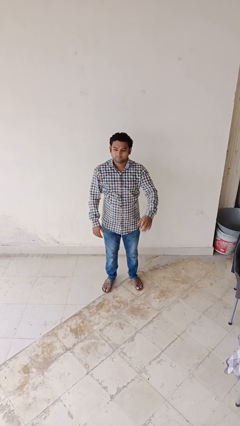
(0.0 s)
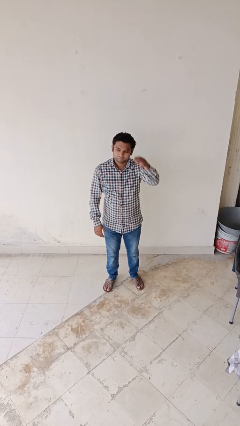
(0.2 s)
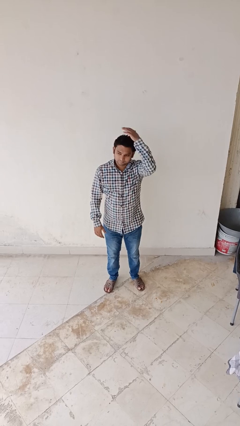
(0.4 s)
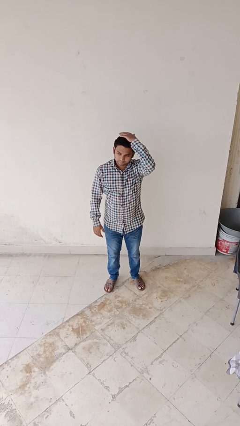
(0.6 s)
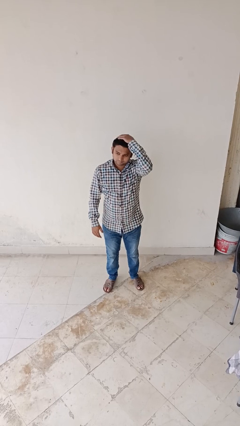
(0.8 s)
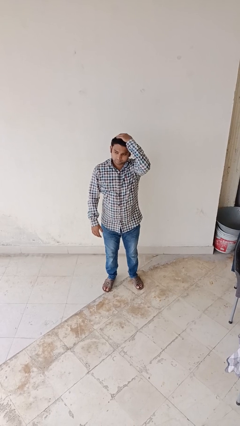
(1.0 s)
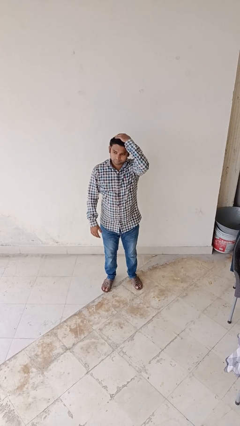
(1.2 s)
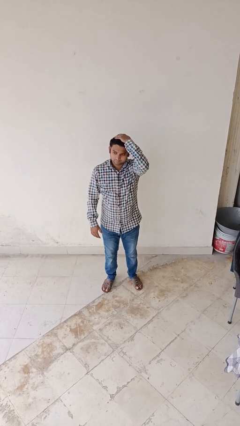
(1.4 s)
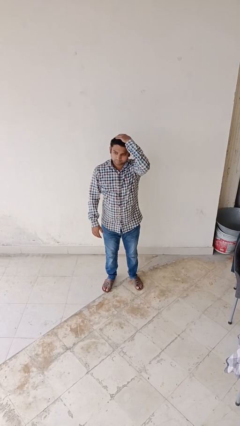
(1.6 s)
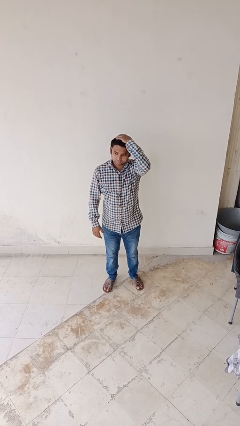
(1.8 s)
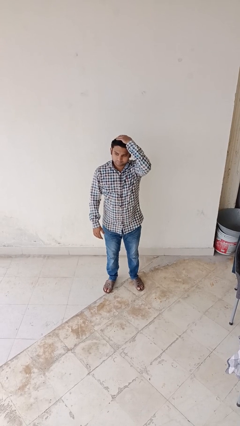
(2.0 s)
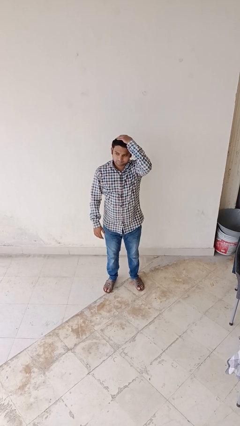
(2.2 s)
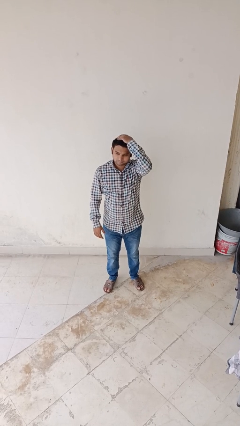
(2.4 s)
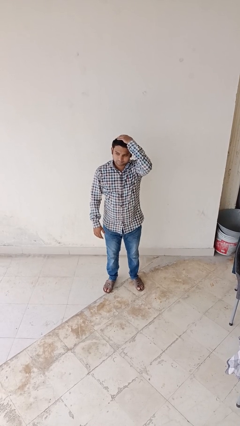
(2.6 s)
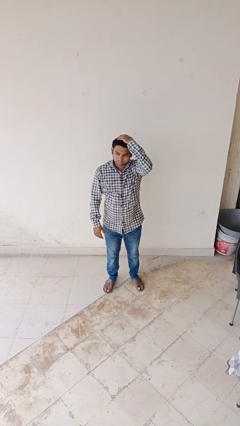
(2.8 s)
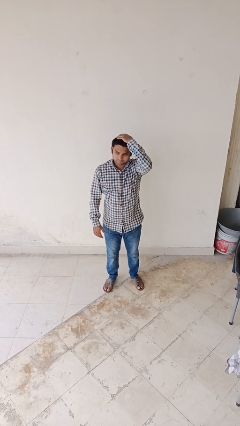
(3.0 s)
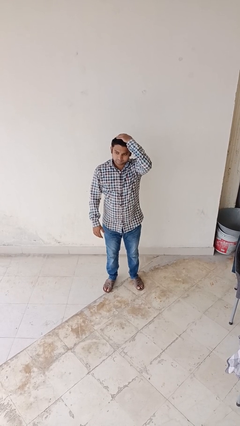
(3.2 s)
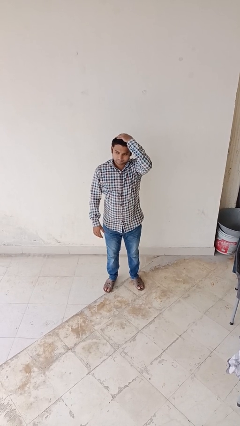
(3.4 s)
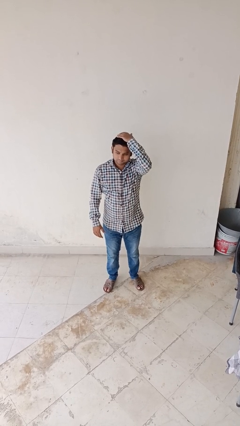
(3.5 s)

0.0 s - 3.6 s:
person pats head

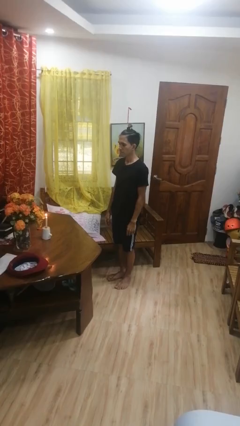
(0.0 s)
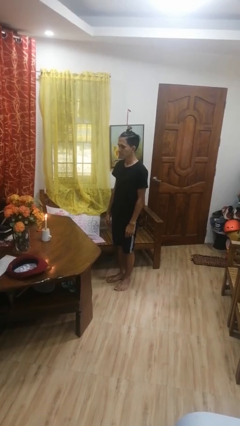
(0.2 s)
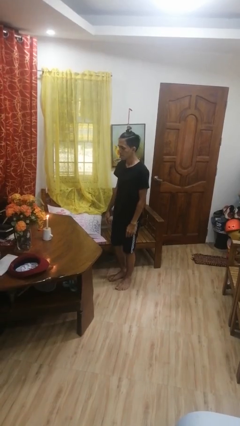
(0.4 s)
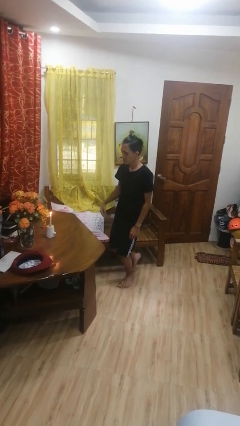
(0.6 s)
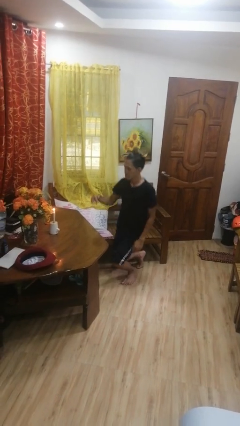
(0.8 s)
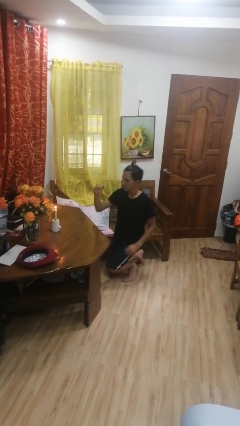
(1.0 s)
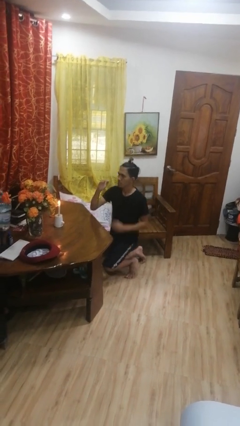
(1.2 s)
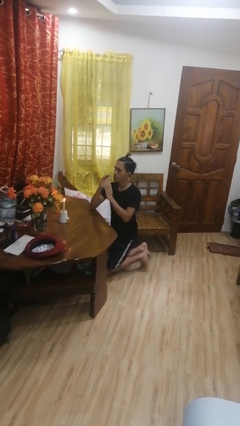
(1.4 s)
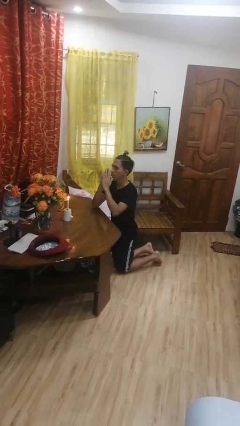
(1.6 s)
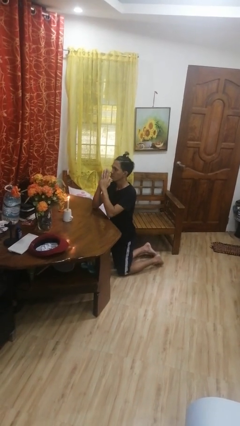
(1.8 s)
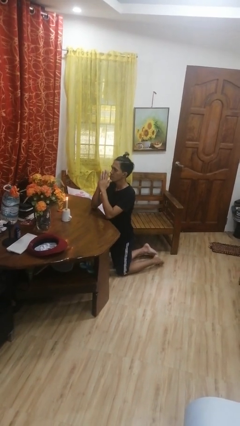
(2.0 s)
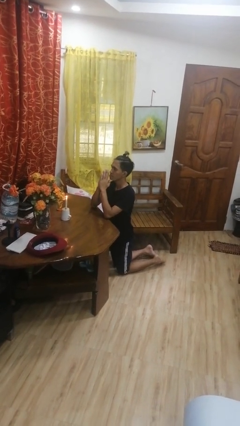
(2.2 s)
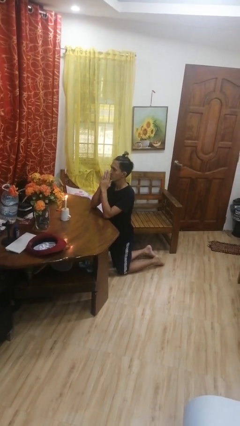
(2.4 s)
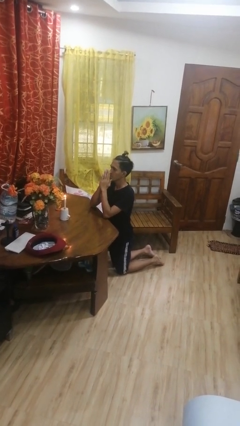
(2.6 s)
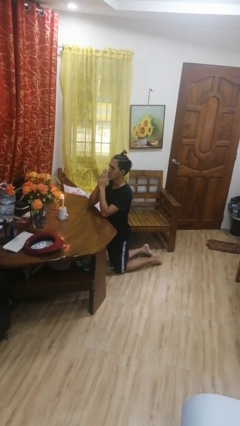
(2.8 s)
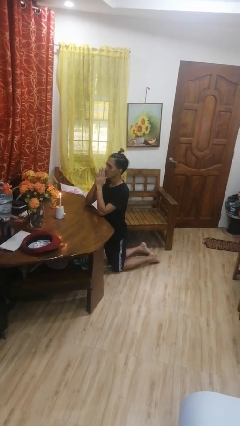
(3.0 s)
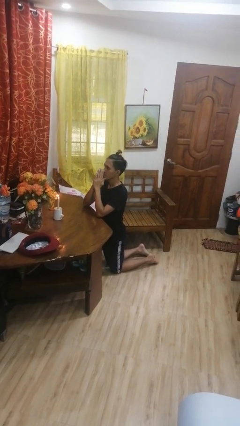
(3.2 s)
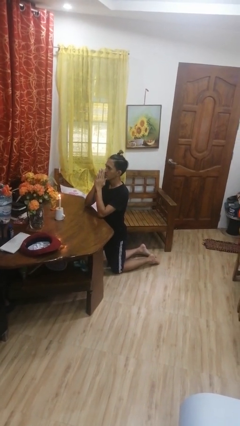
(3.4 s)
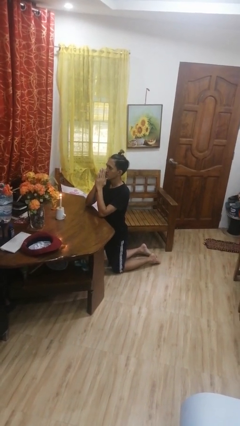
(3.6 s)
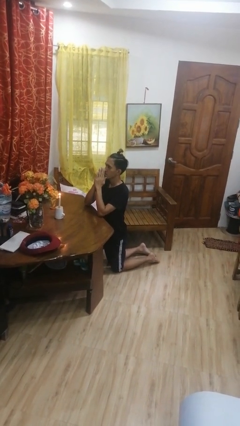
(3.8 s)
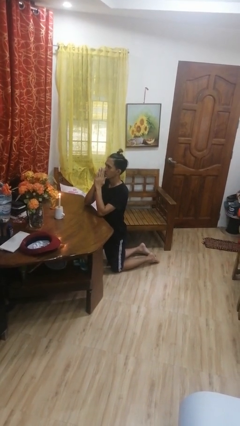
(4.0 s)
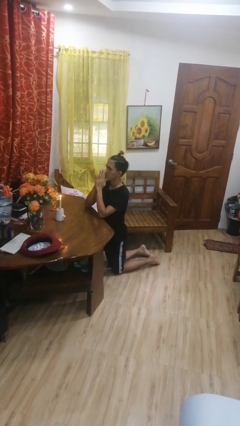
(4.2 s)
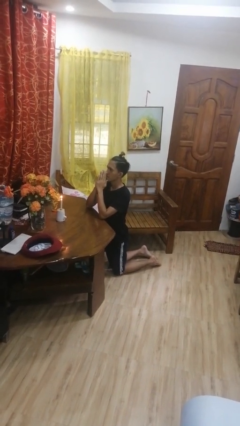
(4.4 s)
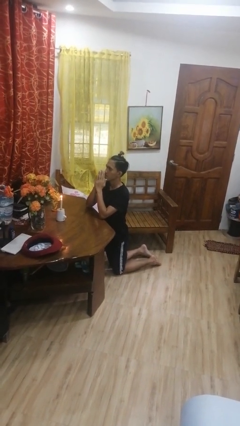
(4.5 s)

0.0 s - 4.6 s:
person prays

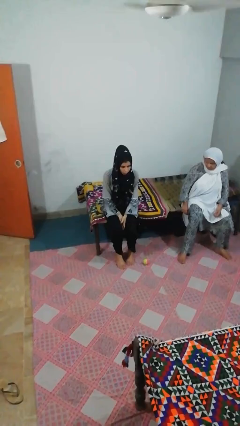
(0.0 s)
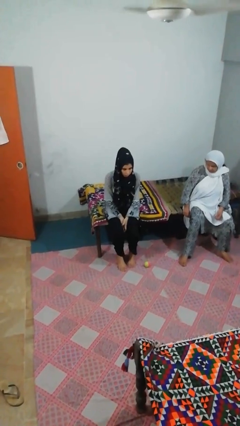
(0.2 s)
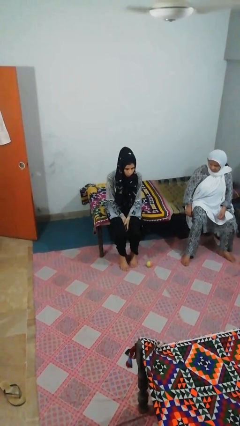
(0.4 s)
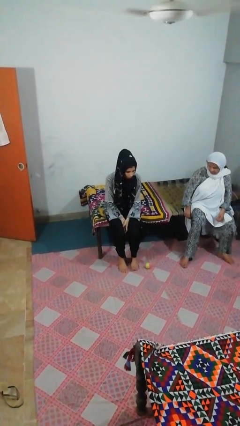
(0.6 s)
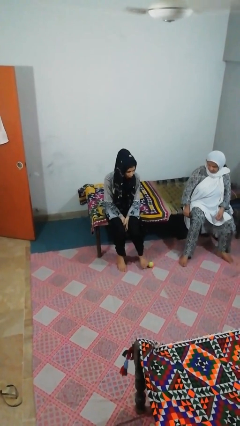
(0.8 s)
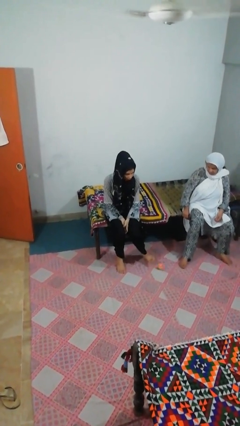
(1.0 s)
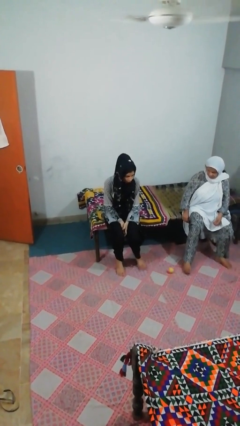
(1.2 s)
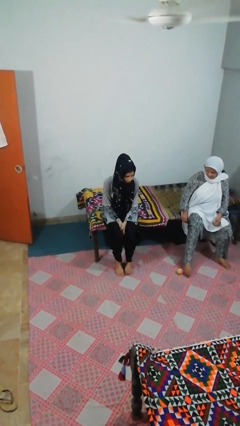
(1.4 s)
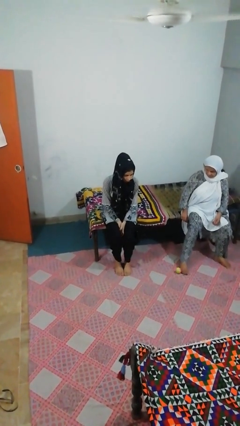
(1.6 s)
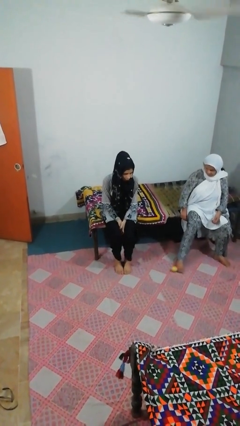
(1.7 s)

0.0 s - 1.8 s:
person kicks object to person

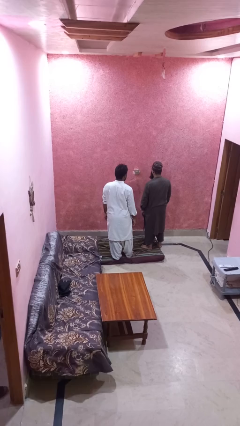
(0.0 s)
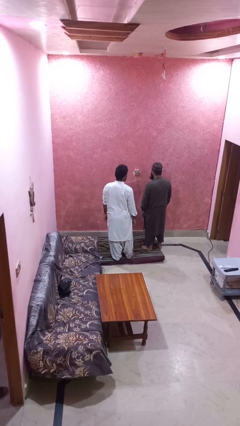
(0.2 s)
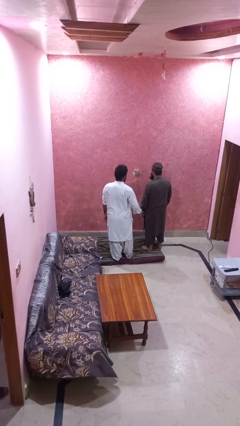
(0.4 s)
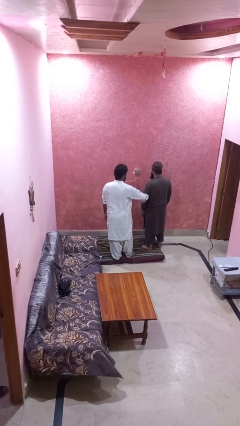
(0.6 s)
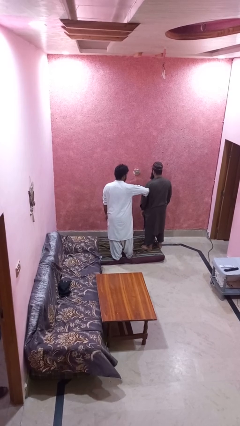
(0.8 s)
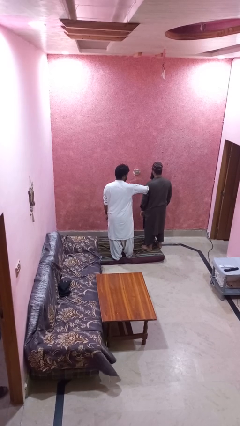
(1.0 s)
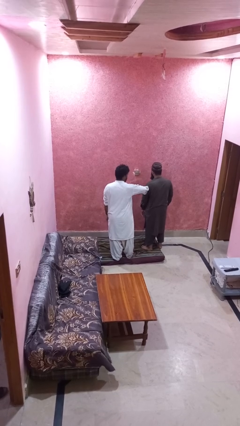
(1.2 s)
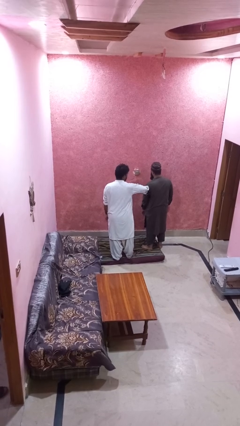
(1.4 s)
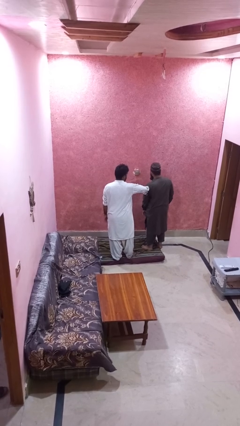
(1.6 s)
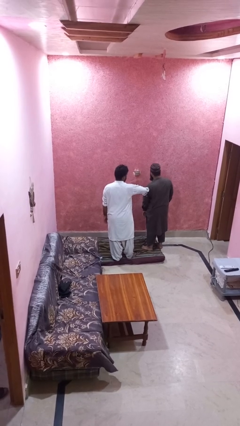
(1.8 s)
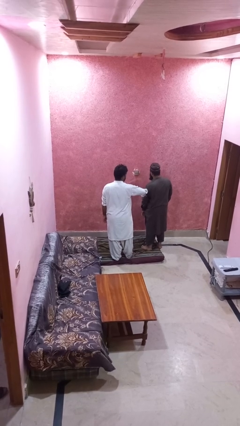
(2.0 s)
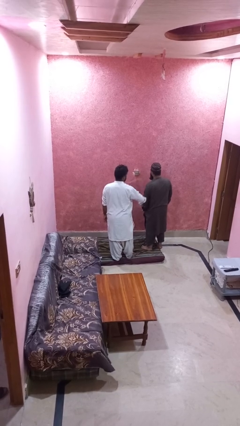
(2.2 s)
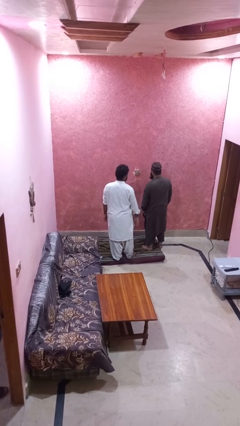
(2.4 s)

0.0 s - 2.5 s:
person grabs person by bicep

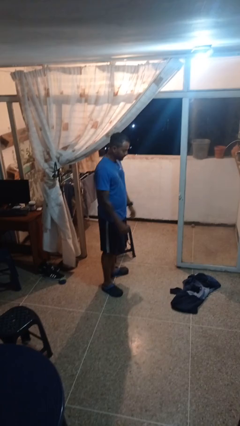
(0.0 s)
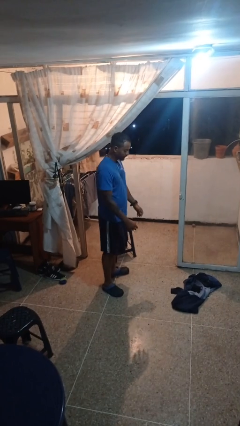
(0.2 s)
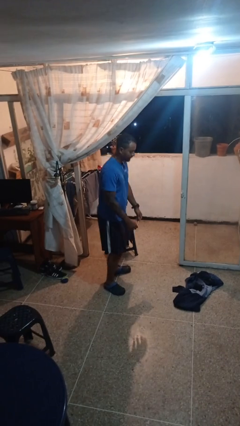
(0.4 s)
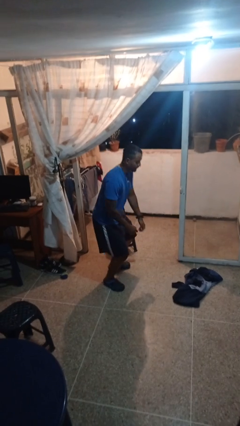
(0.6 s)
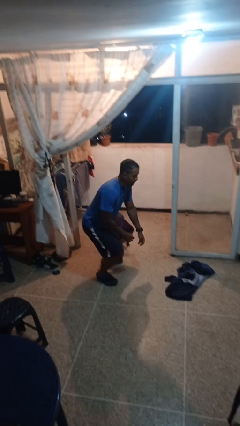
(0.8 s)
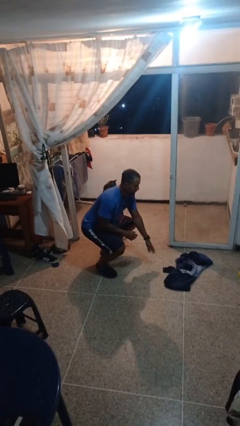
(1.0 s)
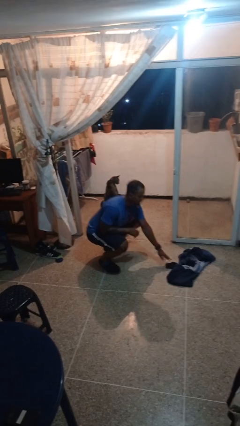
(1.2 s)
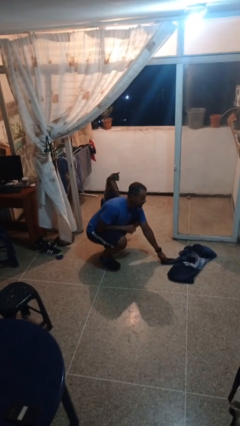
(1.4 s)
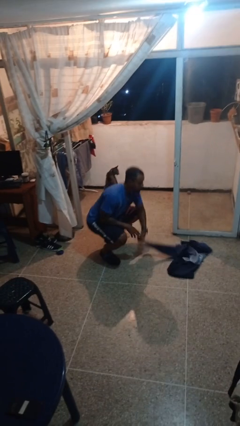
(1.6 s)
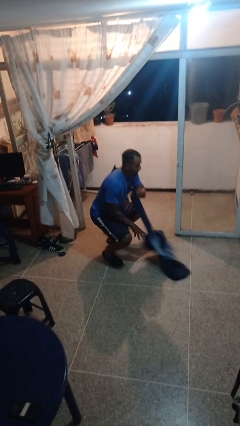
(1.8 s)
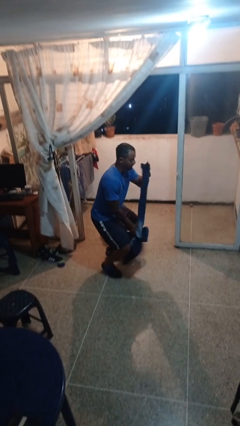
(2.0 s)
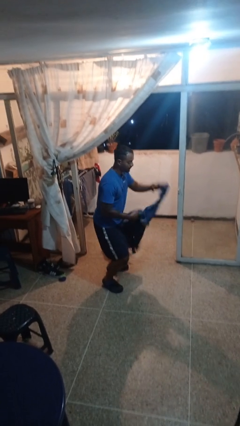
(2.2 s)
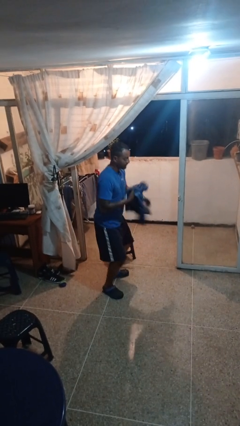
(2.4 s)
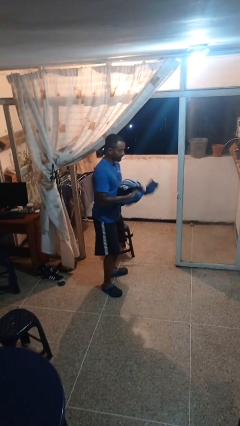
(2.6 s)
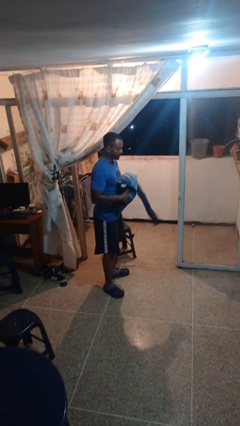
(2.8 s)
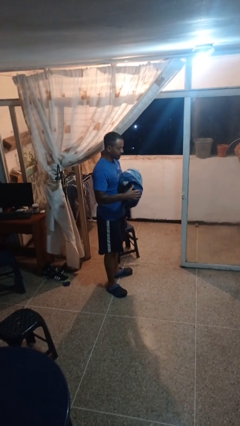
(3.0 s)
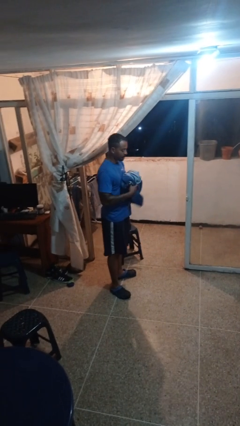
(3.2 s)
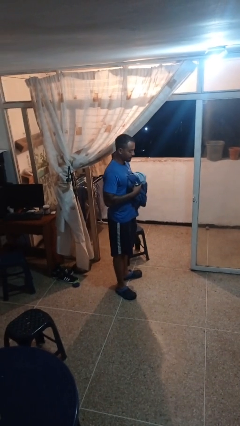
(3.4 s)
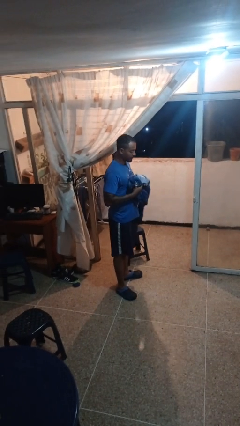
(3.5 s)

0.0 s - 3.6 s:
person picks up object from floor

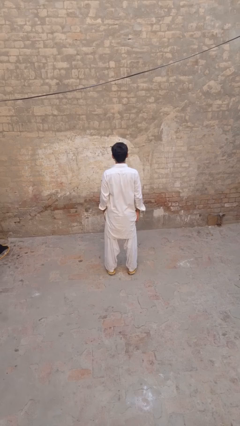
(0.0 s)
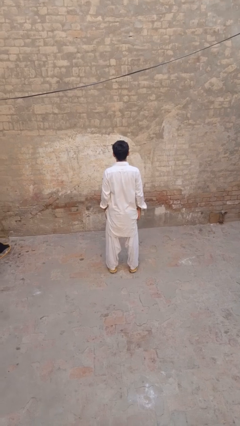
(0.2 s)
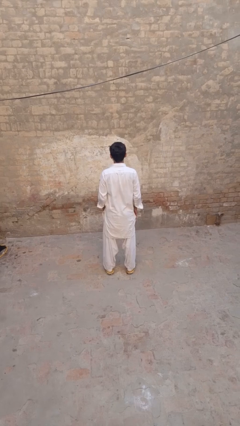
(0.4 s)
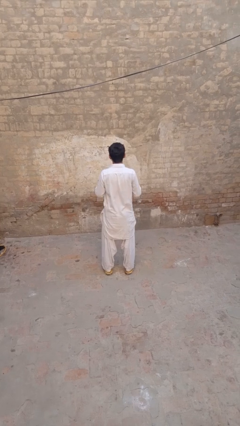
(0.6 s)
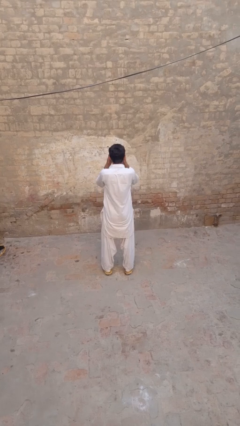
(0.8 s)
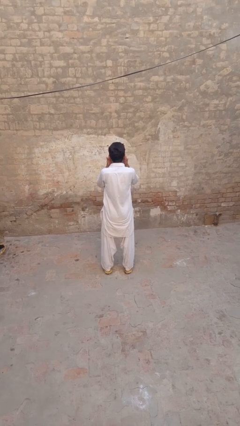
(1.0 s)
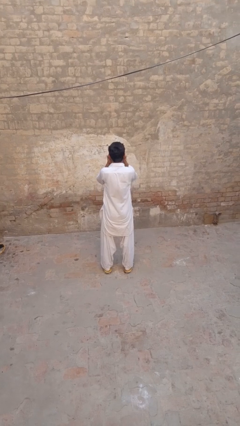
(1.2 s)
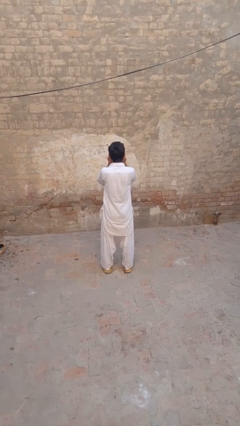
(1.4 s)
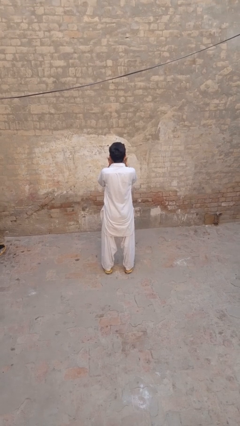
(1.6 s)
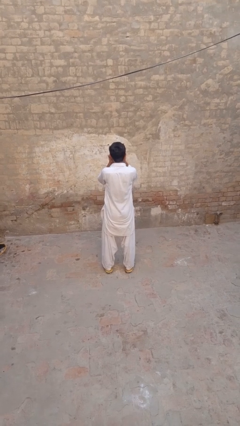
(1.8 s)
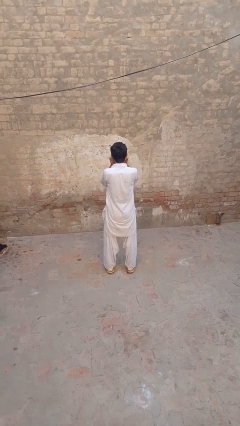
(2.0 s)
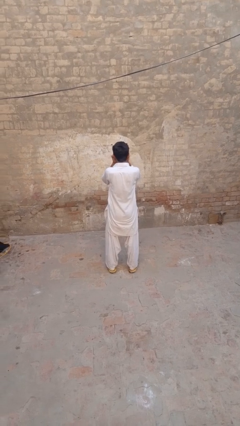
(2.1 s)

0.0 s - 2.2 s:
person shades eyes
